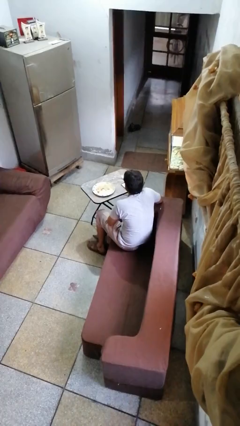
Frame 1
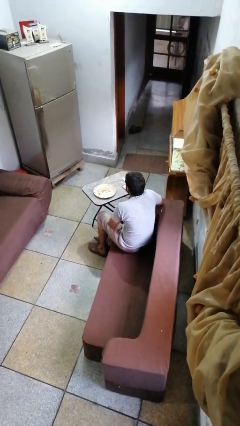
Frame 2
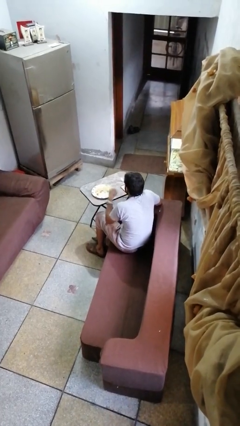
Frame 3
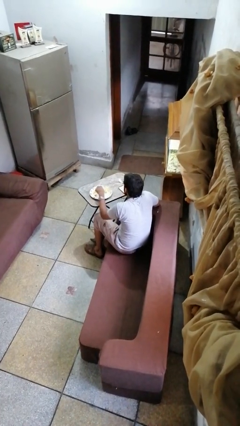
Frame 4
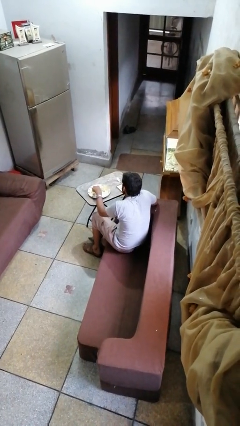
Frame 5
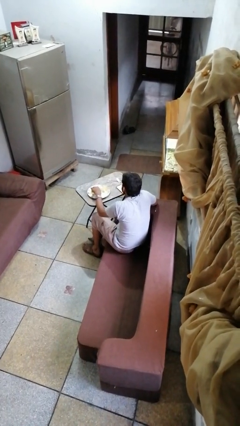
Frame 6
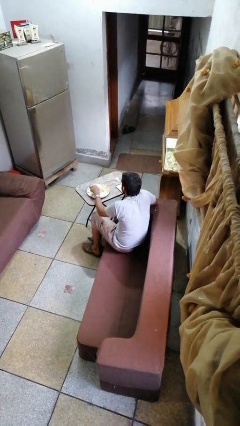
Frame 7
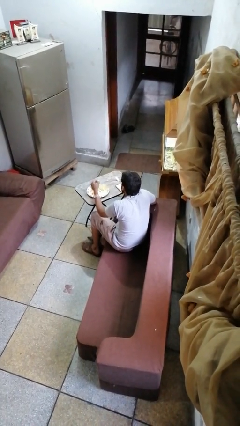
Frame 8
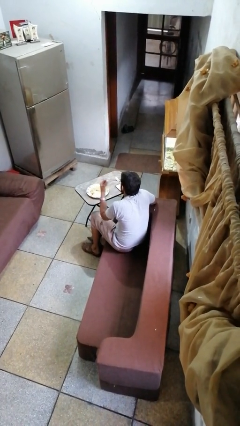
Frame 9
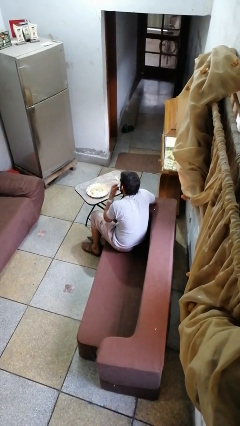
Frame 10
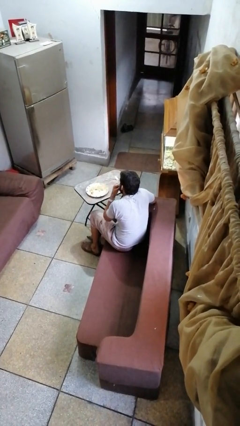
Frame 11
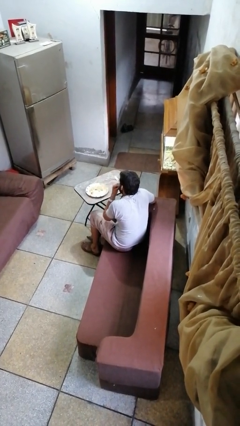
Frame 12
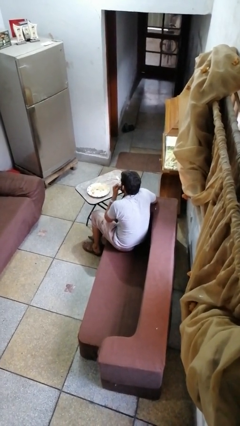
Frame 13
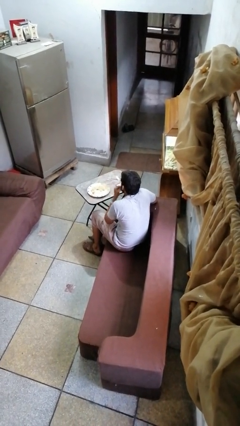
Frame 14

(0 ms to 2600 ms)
person eats with hands

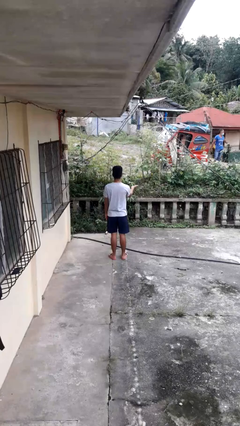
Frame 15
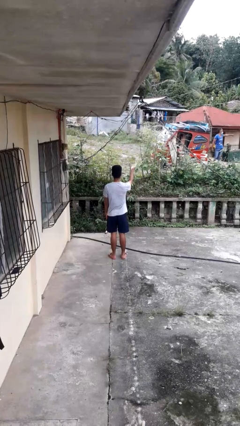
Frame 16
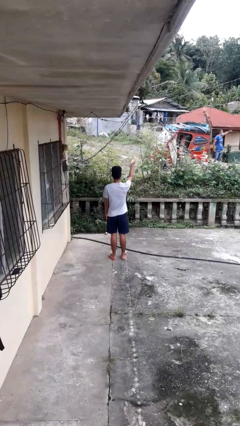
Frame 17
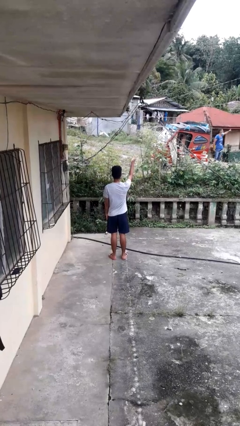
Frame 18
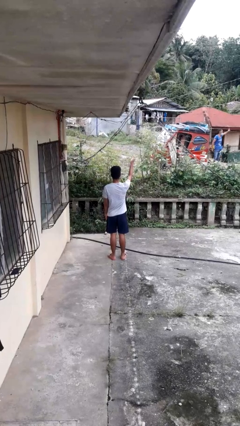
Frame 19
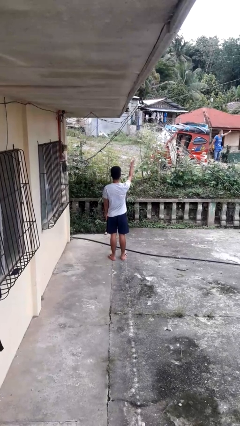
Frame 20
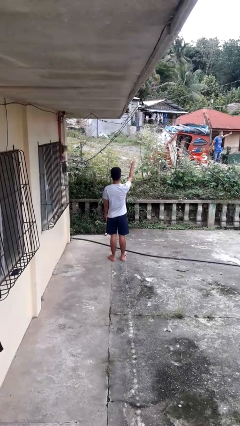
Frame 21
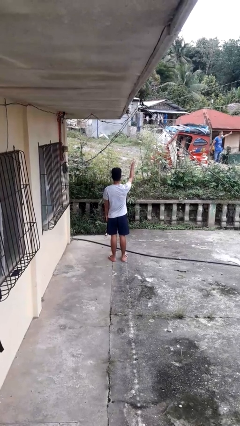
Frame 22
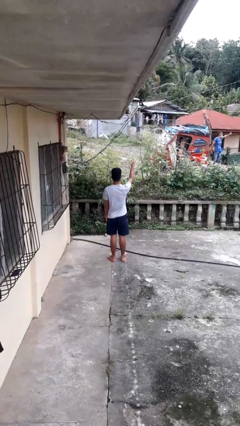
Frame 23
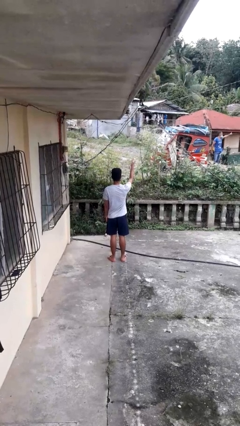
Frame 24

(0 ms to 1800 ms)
person gestures swipe up

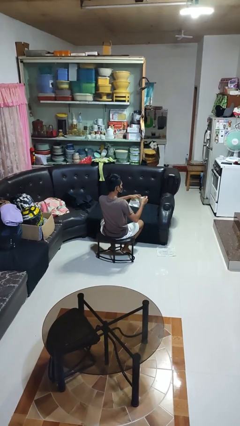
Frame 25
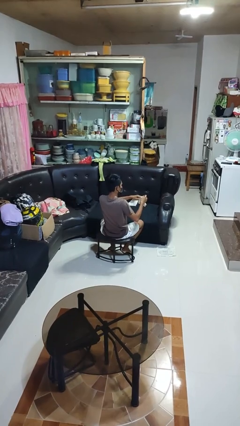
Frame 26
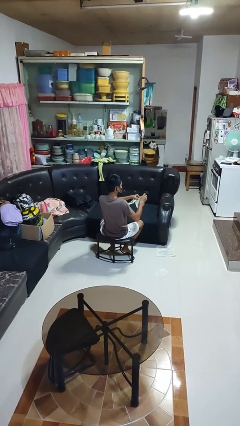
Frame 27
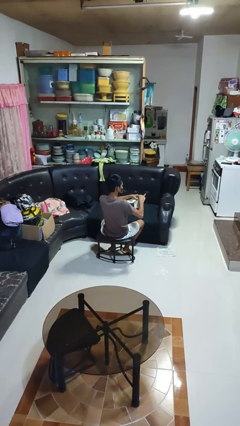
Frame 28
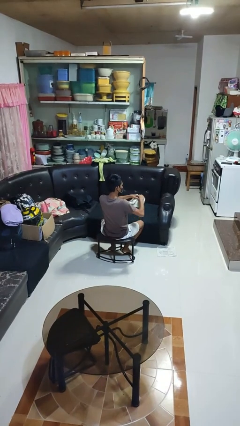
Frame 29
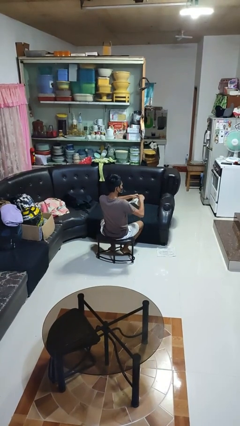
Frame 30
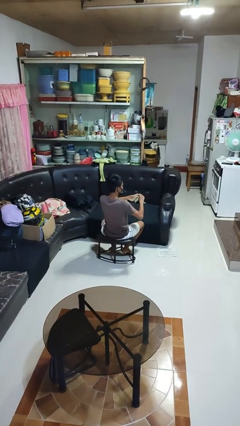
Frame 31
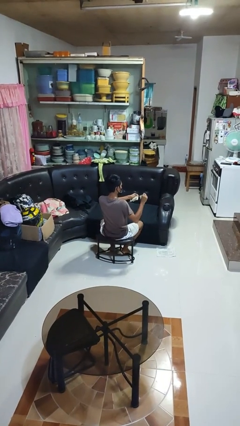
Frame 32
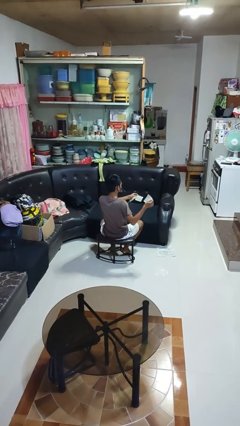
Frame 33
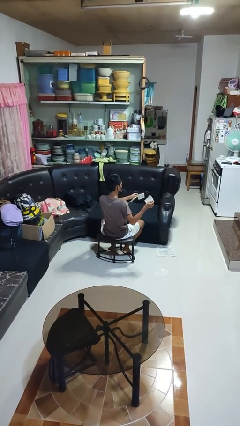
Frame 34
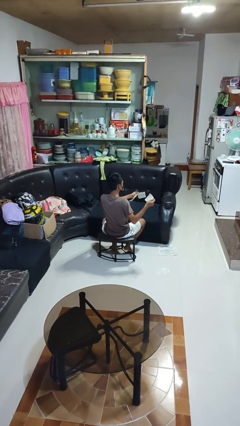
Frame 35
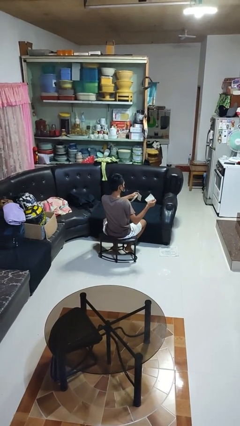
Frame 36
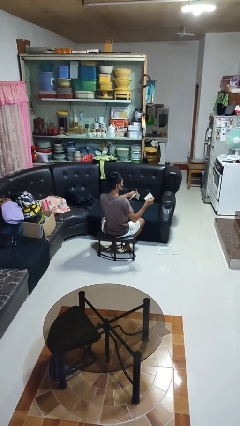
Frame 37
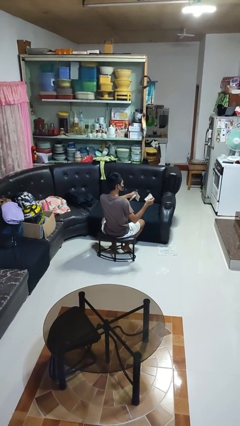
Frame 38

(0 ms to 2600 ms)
person tears paper

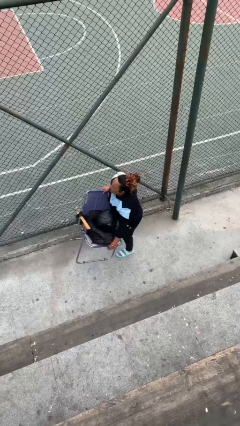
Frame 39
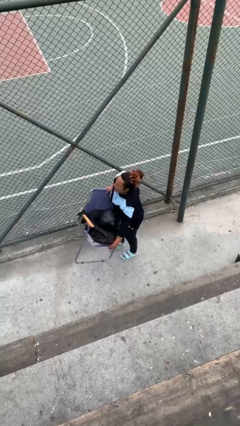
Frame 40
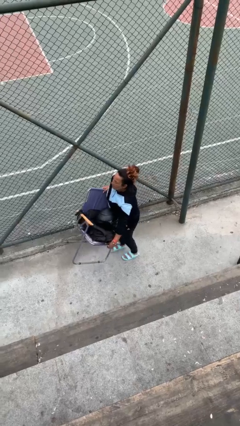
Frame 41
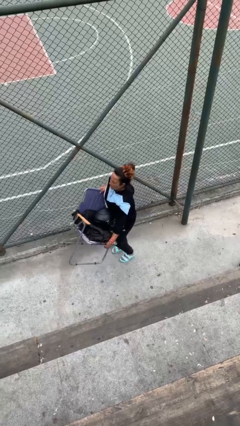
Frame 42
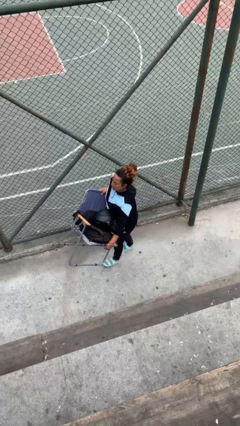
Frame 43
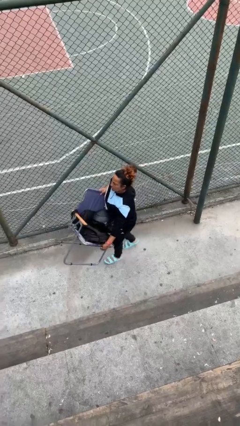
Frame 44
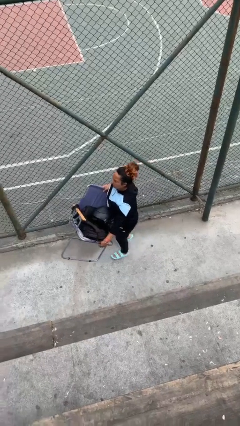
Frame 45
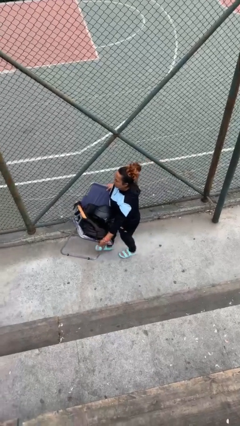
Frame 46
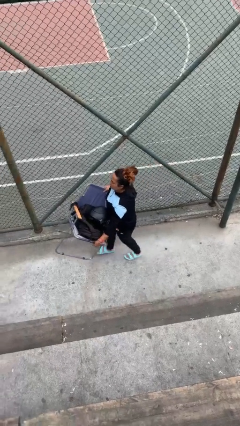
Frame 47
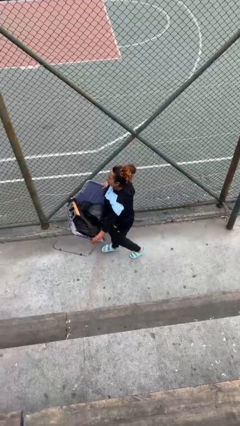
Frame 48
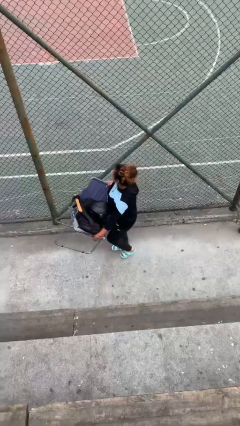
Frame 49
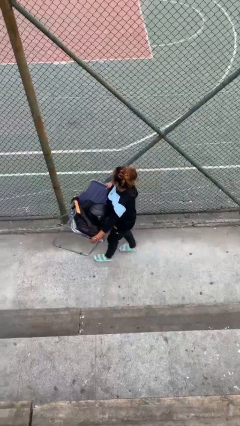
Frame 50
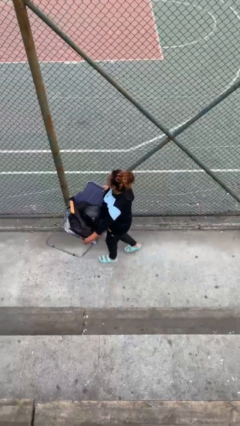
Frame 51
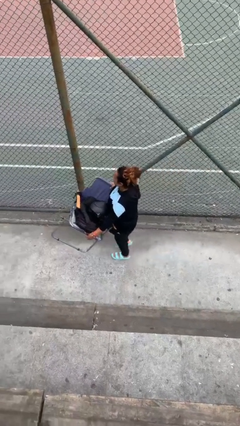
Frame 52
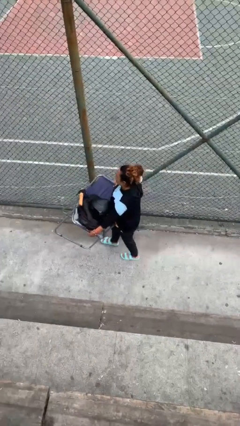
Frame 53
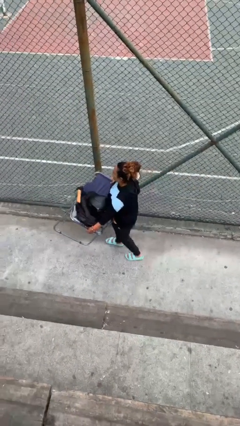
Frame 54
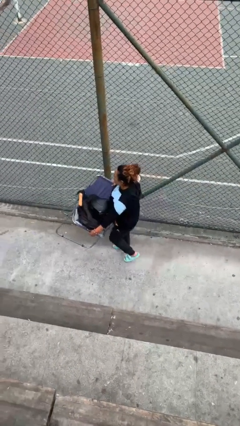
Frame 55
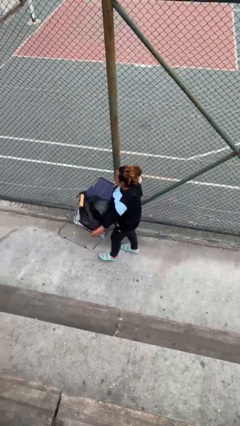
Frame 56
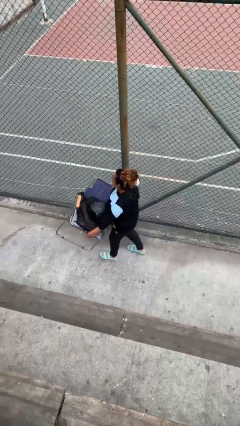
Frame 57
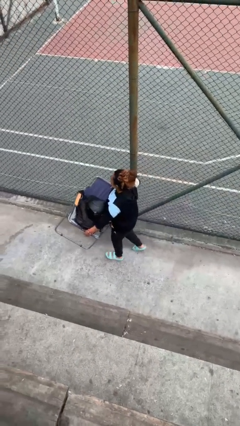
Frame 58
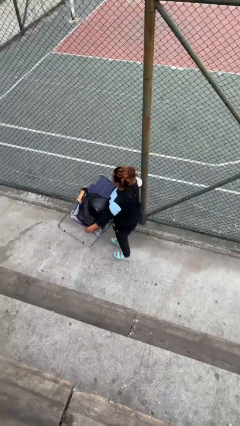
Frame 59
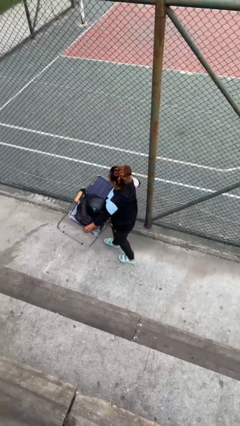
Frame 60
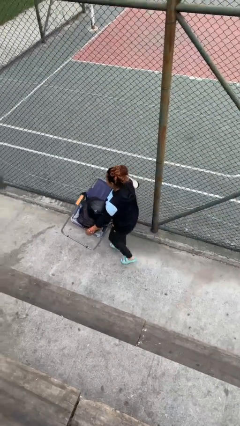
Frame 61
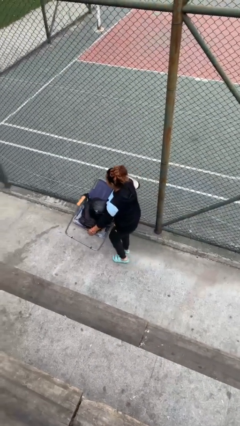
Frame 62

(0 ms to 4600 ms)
person carries heavy object

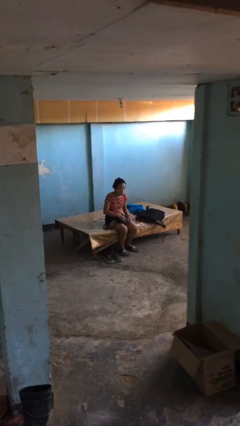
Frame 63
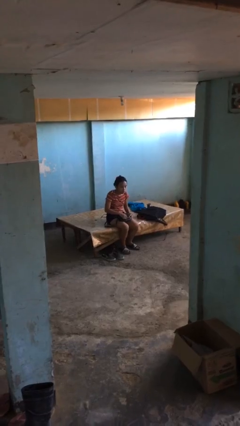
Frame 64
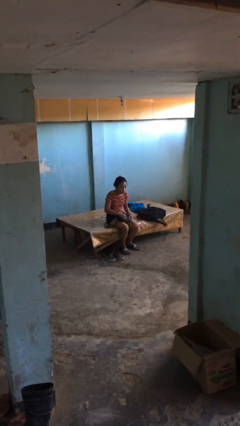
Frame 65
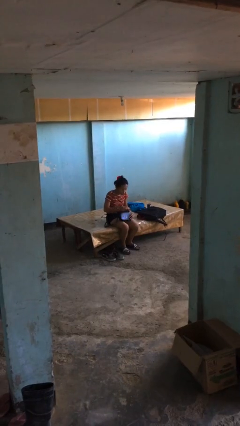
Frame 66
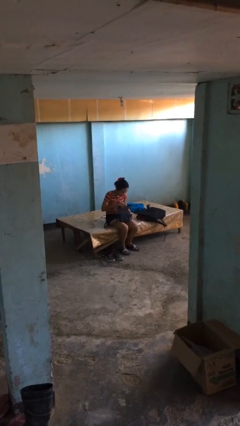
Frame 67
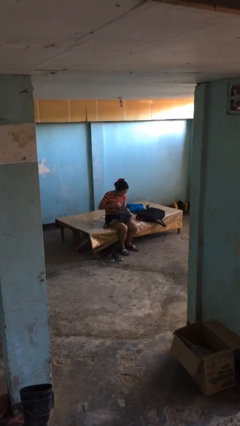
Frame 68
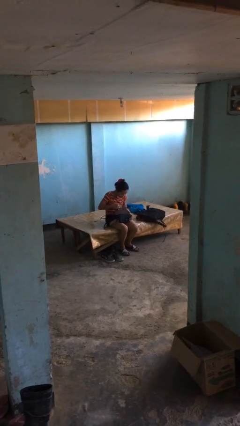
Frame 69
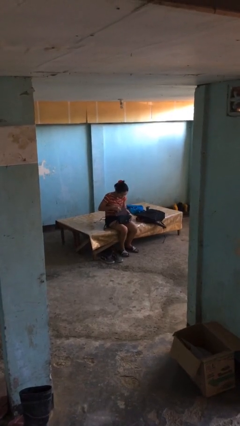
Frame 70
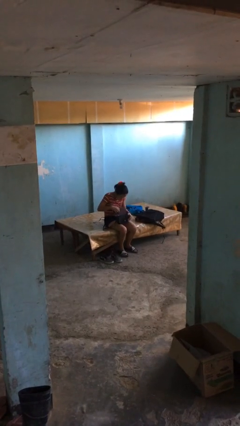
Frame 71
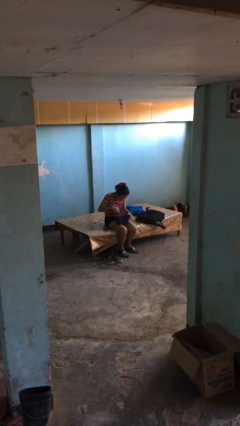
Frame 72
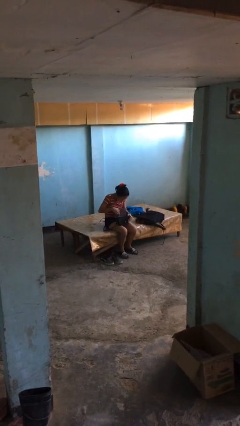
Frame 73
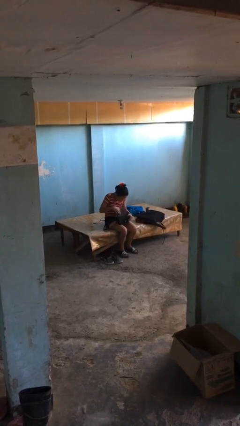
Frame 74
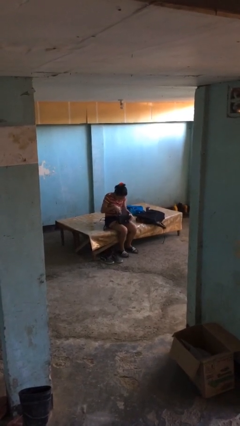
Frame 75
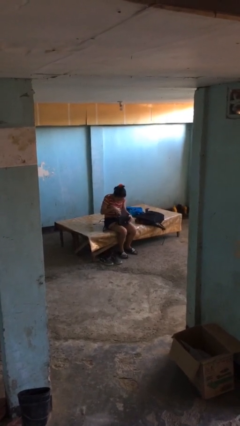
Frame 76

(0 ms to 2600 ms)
person searches in purse

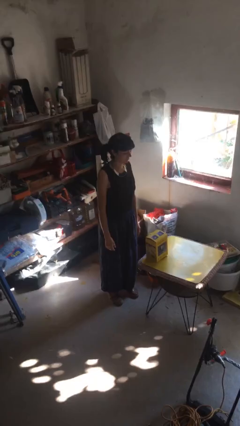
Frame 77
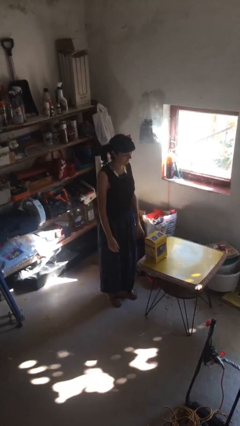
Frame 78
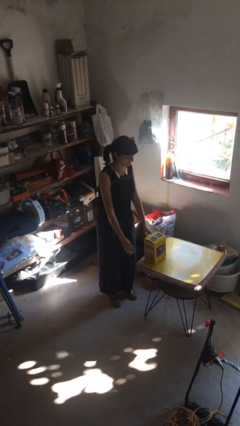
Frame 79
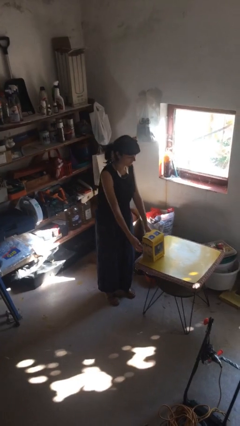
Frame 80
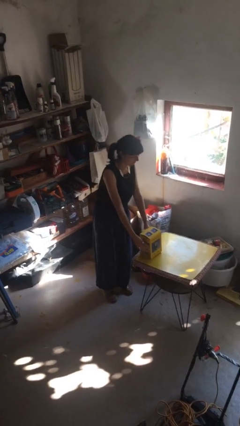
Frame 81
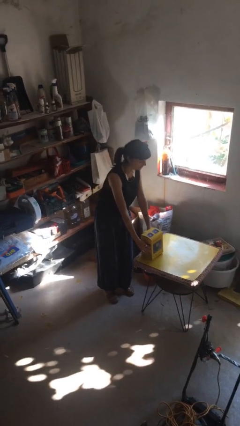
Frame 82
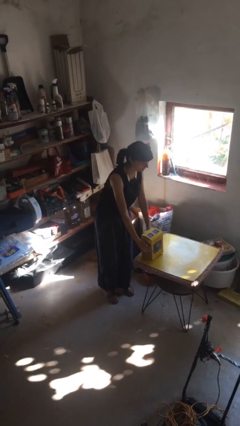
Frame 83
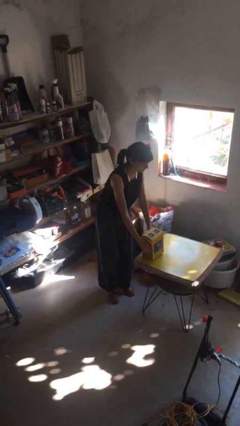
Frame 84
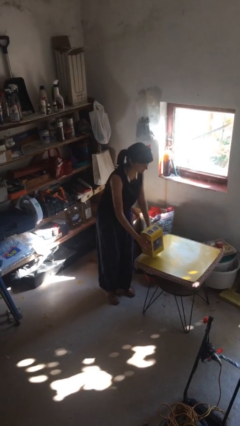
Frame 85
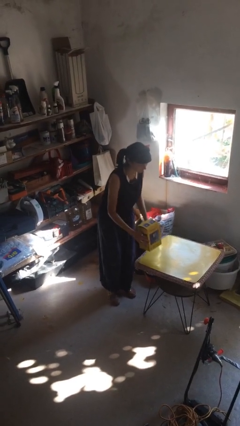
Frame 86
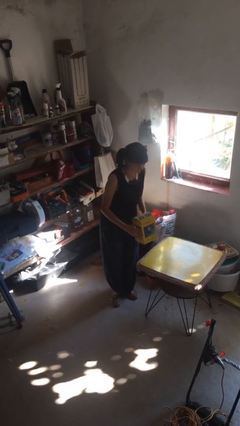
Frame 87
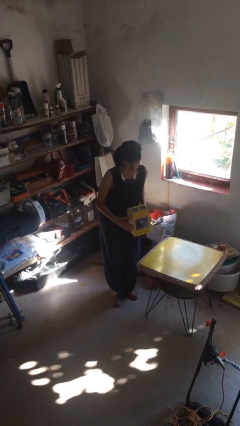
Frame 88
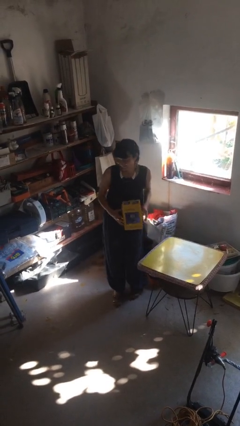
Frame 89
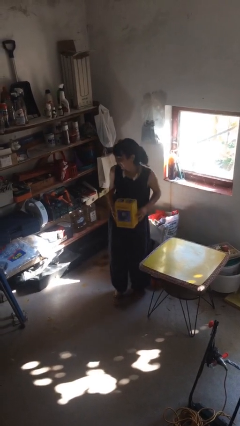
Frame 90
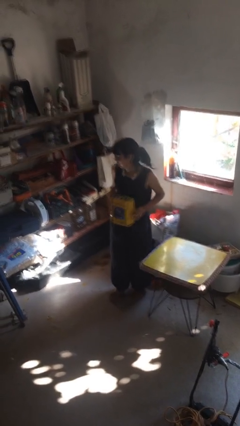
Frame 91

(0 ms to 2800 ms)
person picks up object from table
